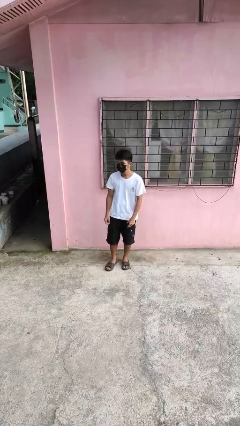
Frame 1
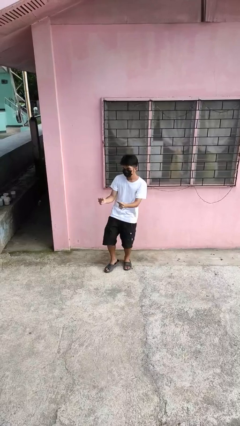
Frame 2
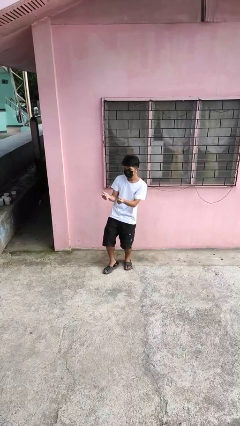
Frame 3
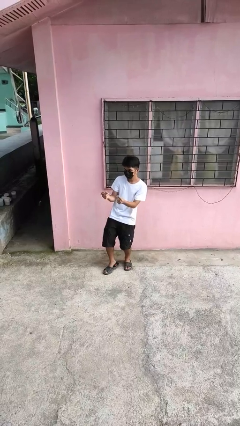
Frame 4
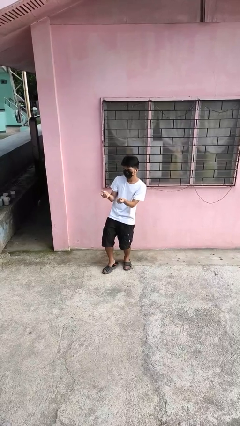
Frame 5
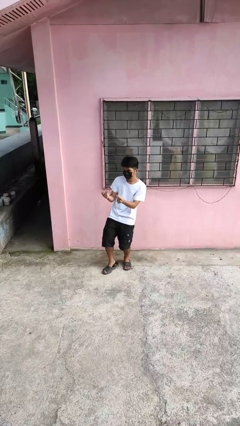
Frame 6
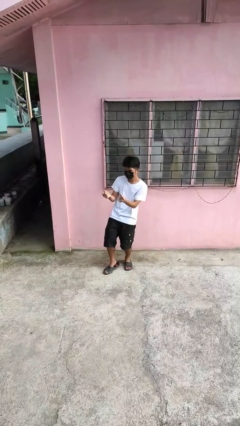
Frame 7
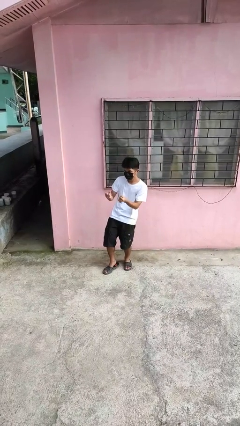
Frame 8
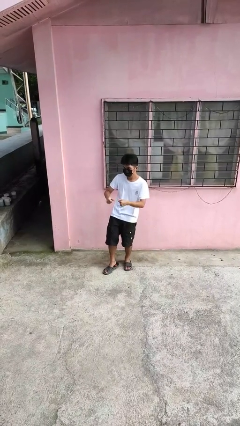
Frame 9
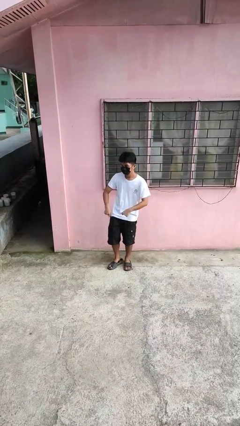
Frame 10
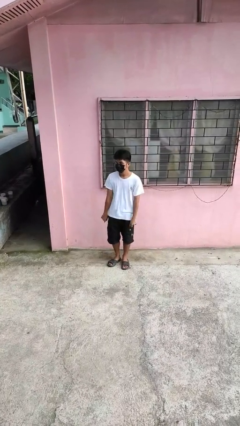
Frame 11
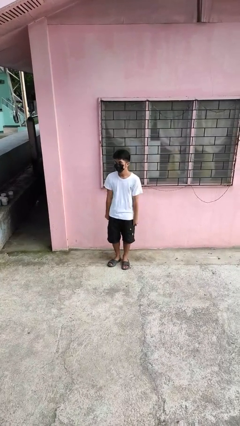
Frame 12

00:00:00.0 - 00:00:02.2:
person snaps fingers

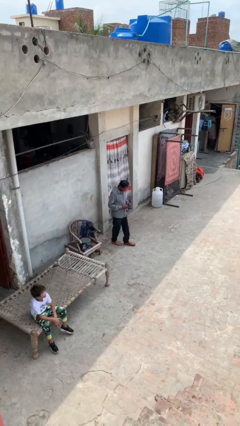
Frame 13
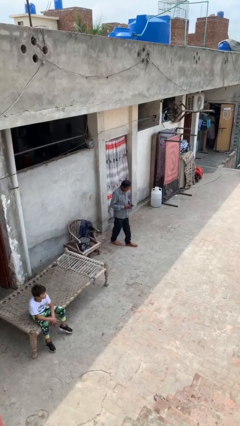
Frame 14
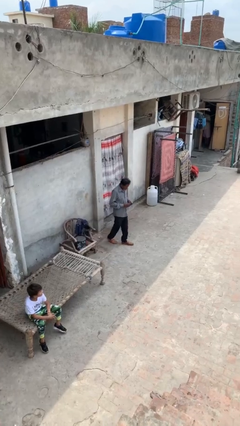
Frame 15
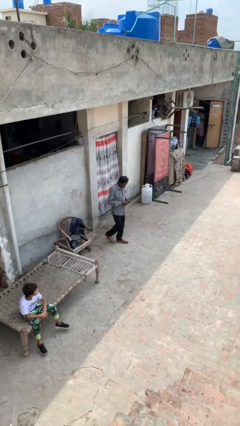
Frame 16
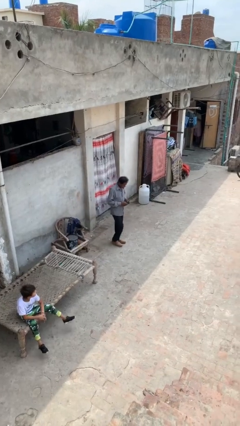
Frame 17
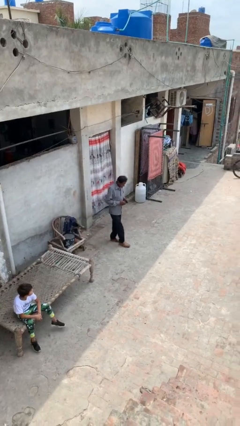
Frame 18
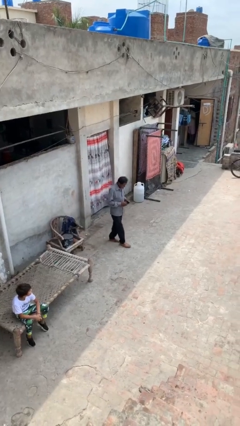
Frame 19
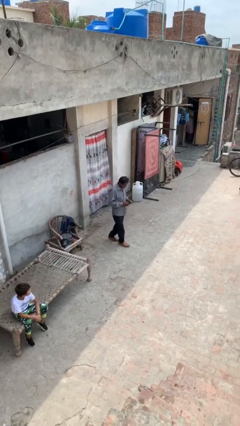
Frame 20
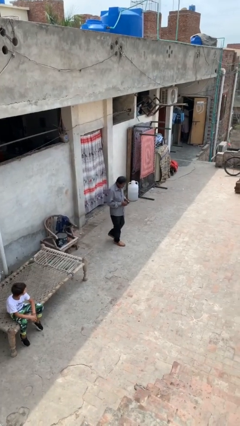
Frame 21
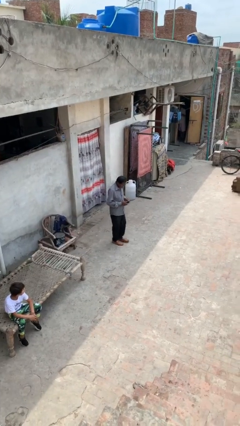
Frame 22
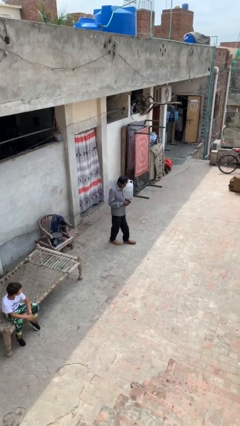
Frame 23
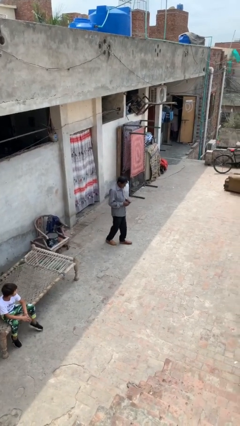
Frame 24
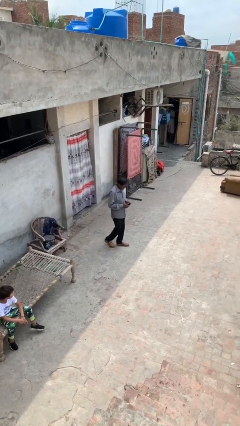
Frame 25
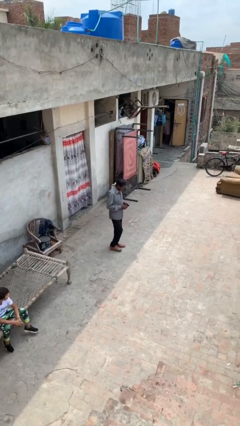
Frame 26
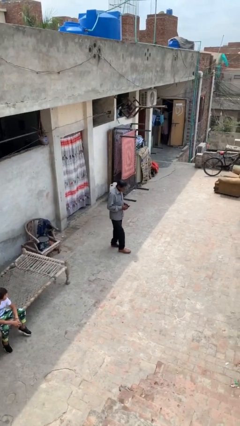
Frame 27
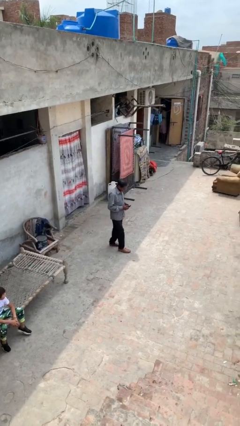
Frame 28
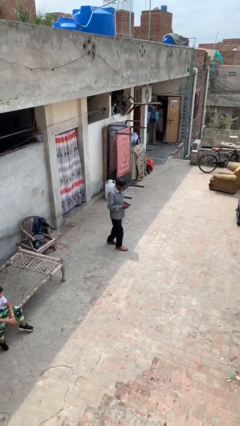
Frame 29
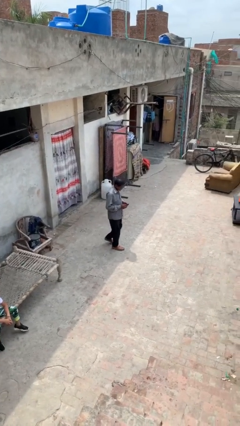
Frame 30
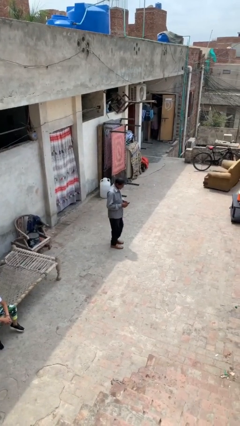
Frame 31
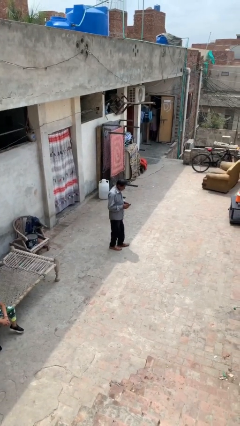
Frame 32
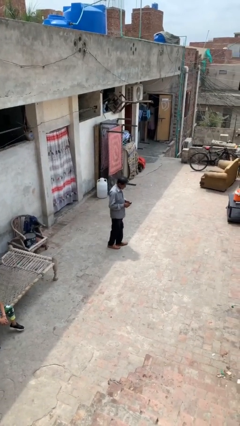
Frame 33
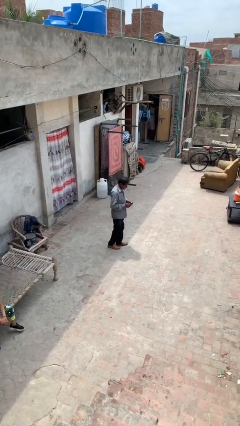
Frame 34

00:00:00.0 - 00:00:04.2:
person texts on phone

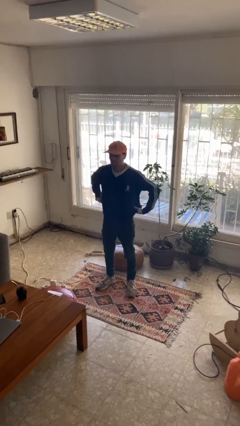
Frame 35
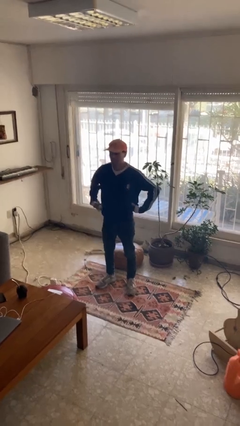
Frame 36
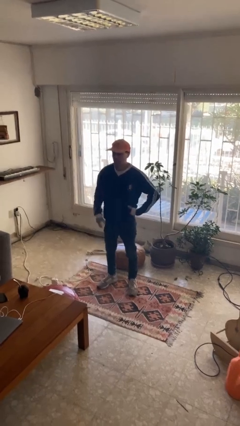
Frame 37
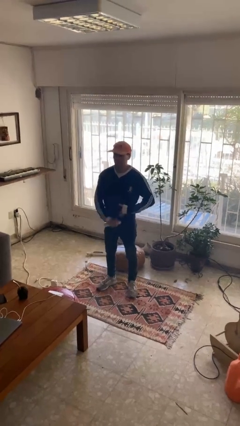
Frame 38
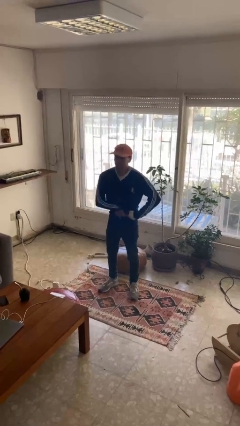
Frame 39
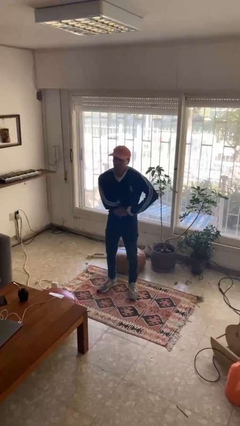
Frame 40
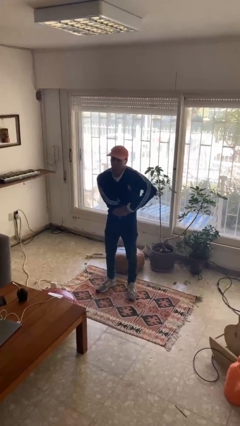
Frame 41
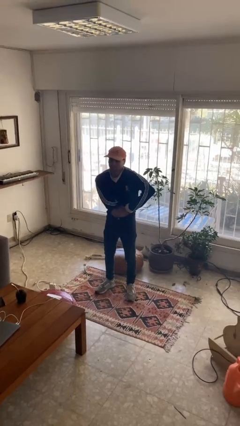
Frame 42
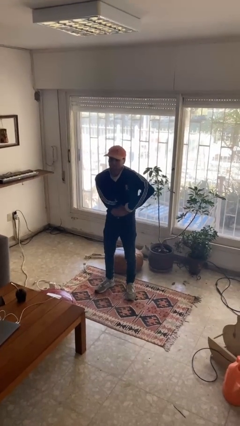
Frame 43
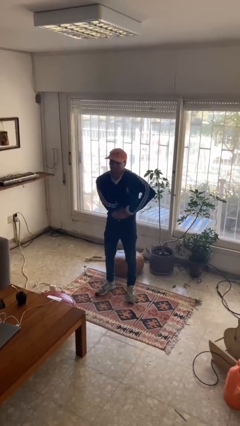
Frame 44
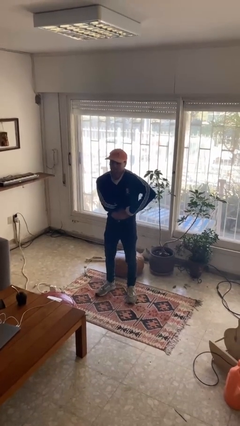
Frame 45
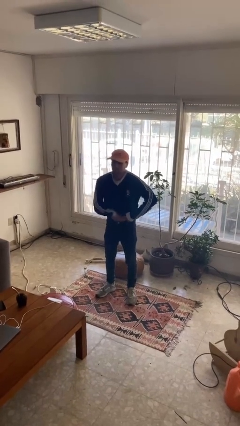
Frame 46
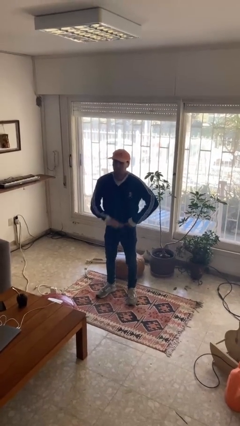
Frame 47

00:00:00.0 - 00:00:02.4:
person applies deodorant

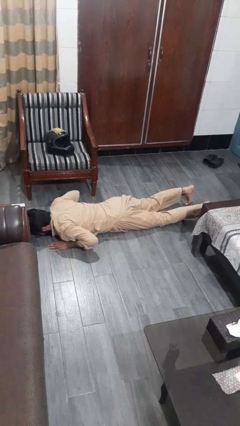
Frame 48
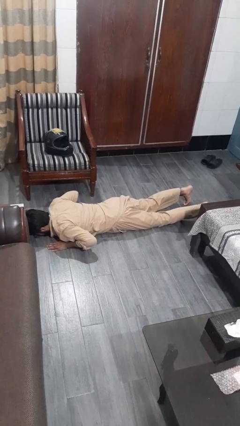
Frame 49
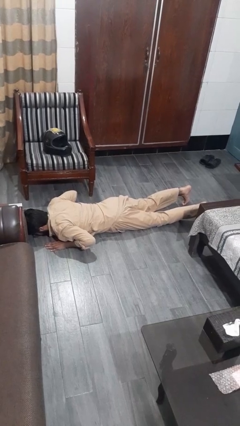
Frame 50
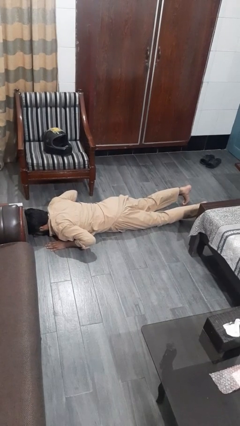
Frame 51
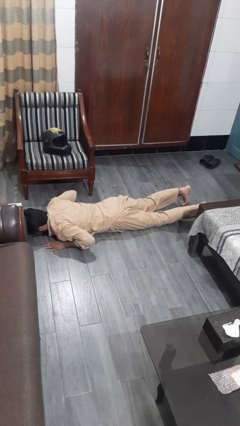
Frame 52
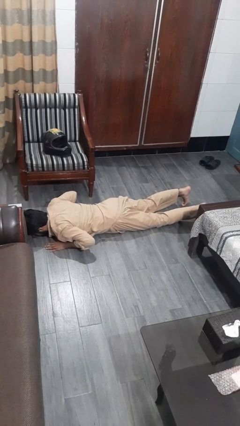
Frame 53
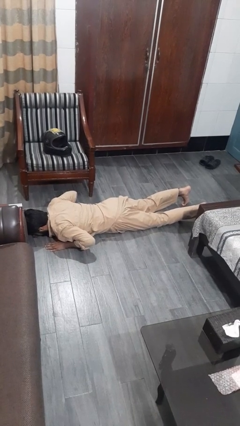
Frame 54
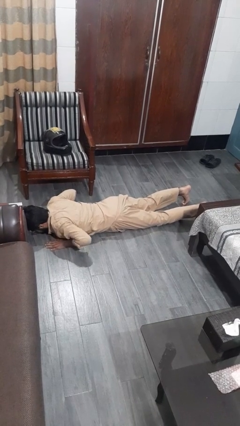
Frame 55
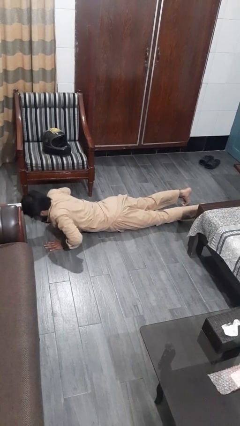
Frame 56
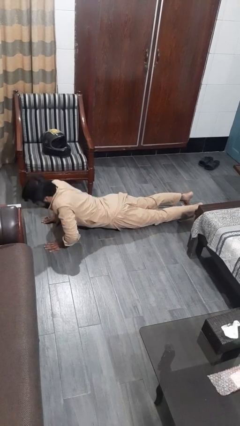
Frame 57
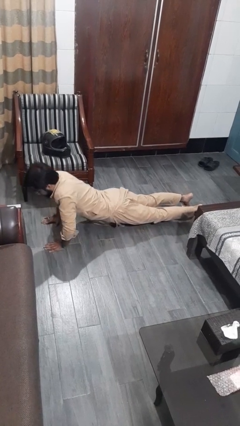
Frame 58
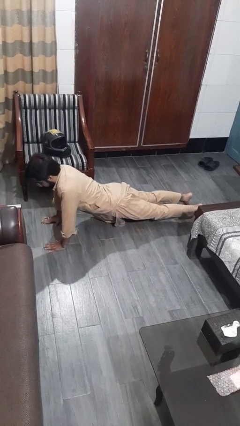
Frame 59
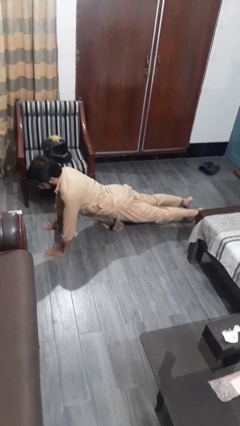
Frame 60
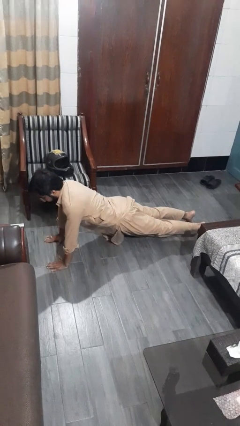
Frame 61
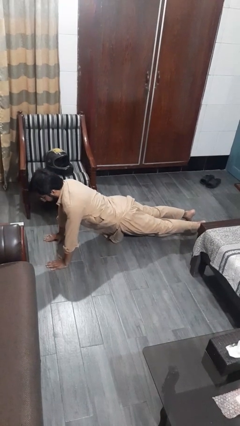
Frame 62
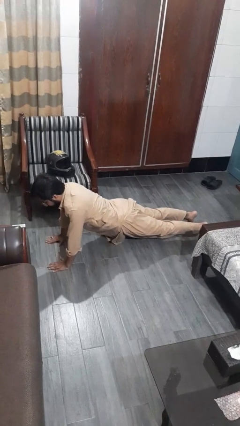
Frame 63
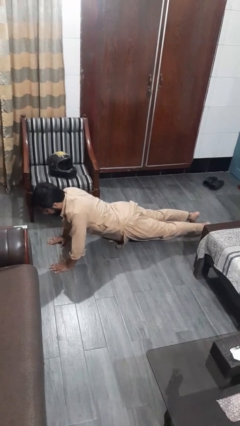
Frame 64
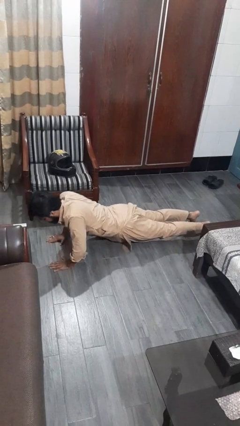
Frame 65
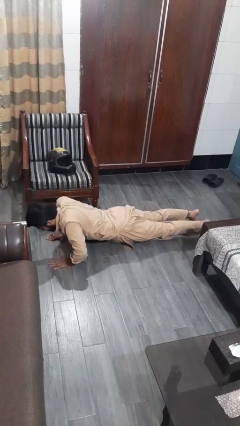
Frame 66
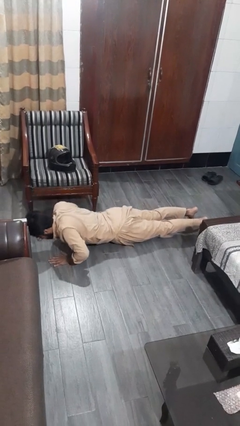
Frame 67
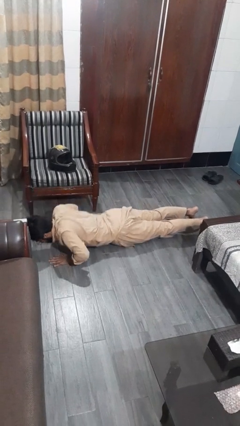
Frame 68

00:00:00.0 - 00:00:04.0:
person exercises with pushup

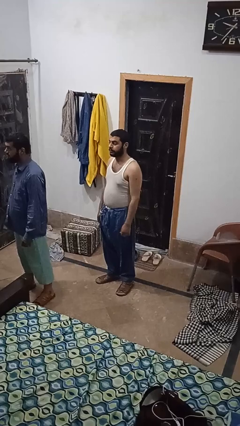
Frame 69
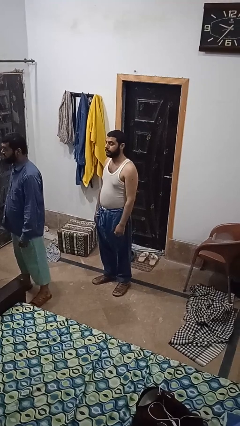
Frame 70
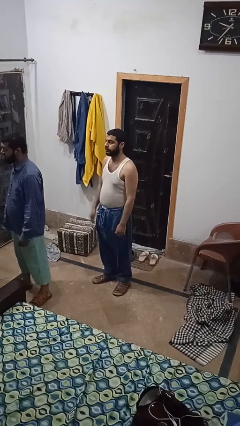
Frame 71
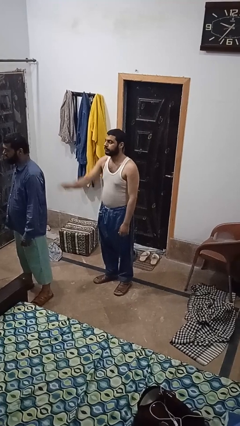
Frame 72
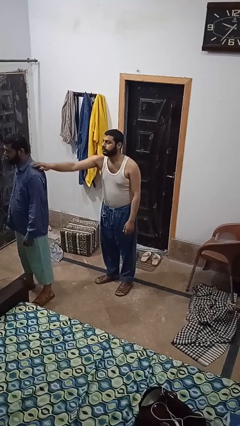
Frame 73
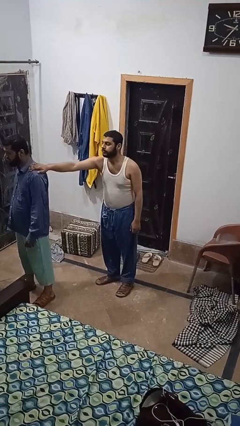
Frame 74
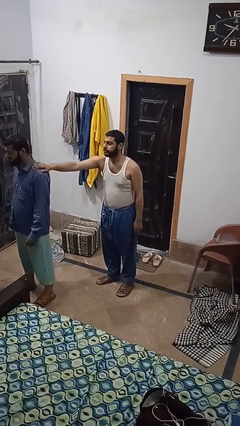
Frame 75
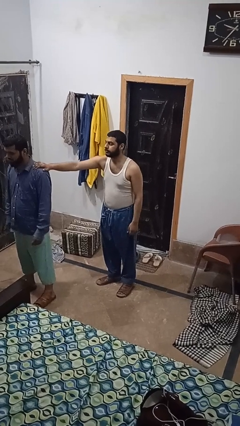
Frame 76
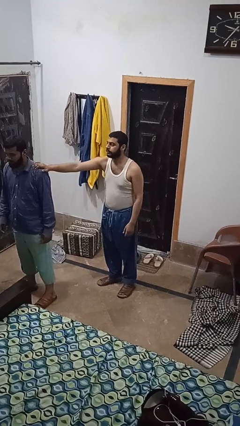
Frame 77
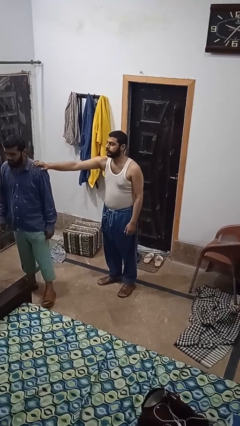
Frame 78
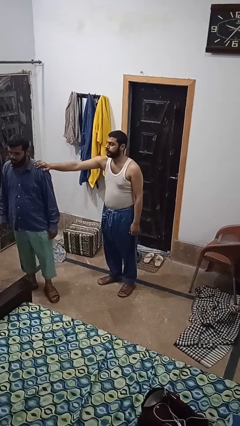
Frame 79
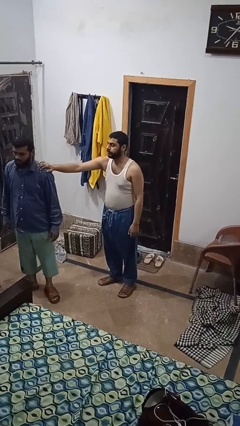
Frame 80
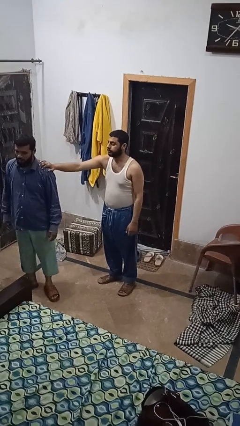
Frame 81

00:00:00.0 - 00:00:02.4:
person grabs person by shoulder

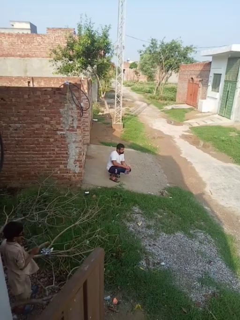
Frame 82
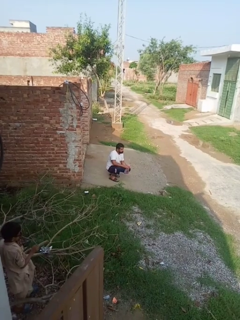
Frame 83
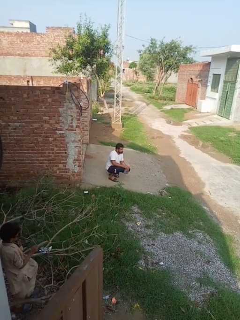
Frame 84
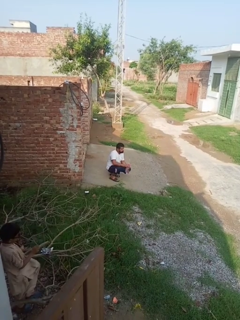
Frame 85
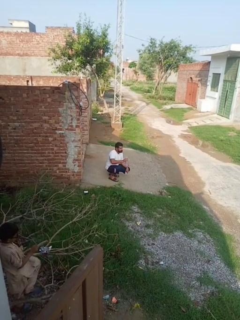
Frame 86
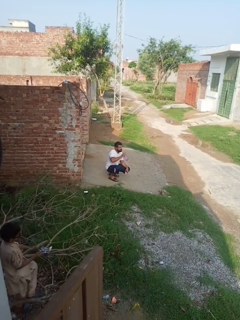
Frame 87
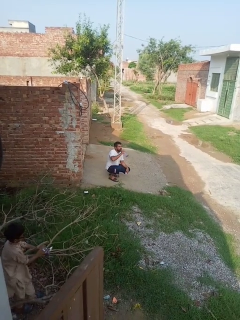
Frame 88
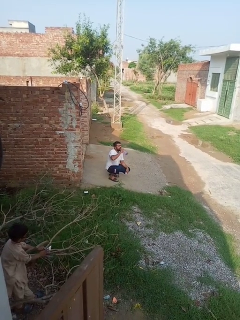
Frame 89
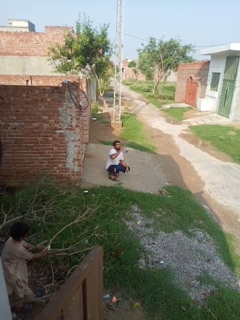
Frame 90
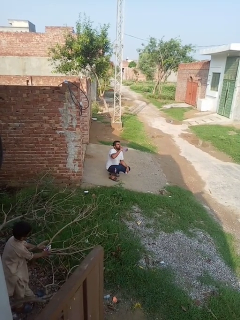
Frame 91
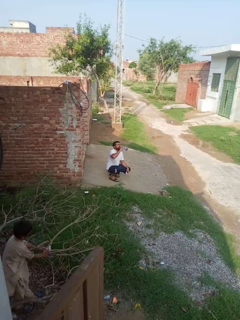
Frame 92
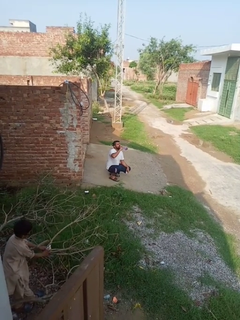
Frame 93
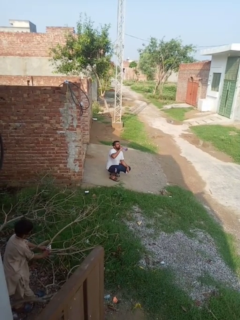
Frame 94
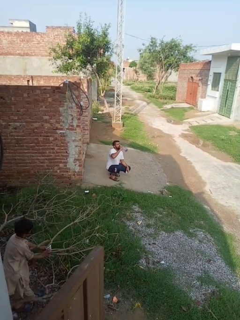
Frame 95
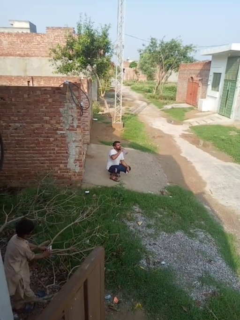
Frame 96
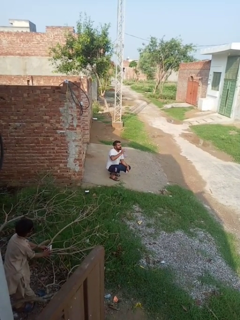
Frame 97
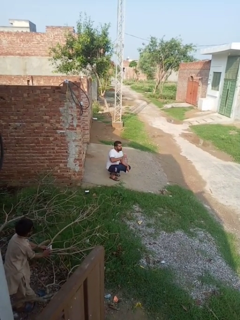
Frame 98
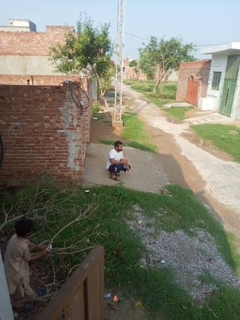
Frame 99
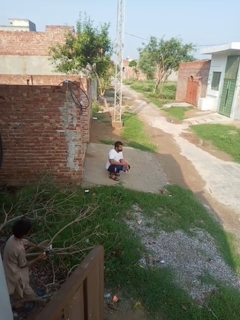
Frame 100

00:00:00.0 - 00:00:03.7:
person drinks from bottle
